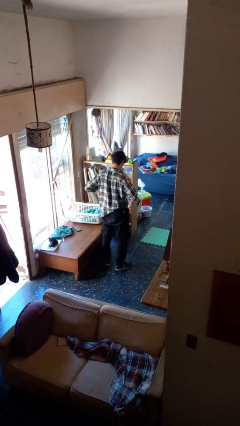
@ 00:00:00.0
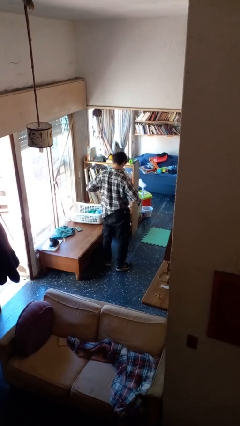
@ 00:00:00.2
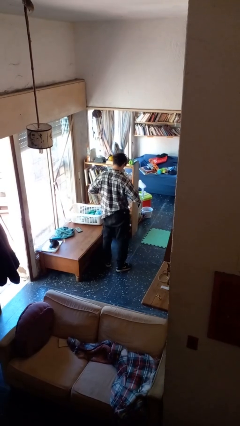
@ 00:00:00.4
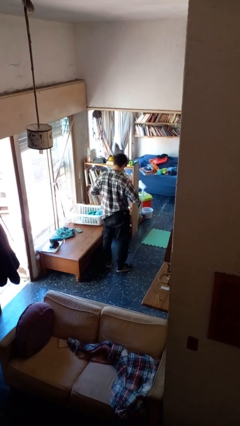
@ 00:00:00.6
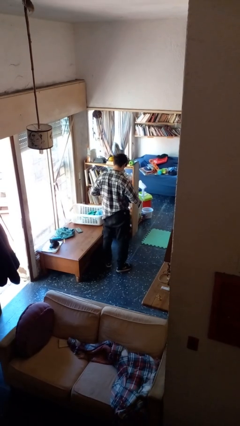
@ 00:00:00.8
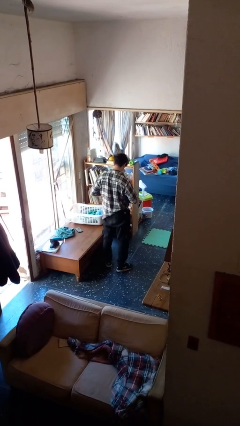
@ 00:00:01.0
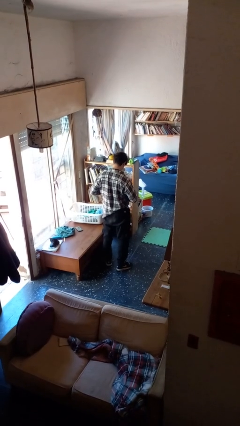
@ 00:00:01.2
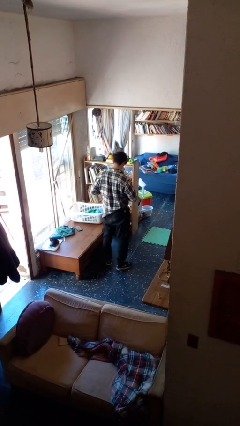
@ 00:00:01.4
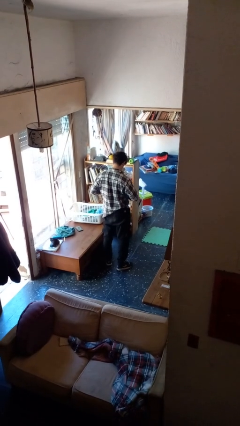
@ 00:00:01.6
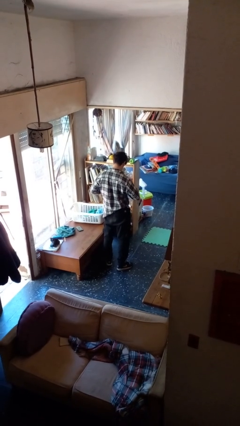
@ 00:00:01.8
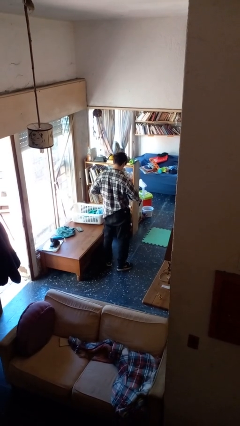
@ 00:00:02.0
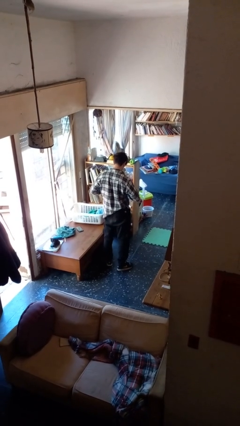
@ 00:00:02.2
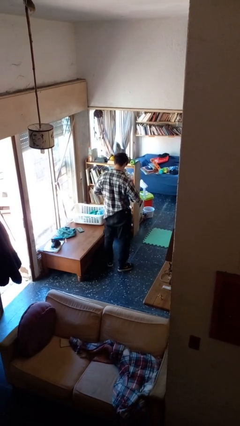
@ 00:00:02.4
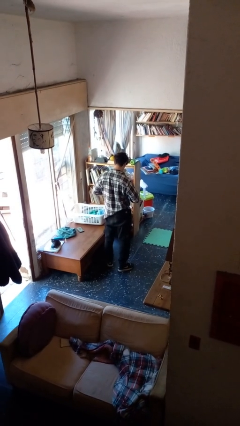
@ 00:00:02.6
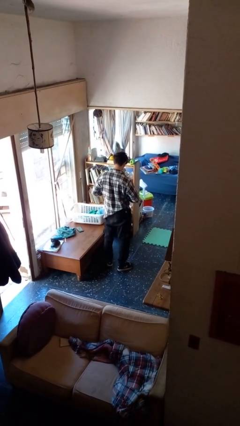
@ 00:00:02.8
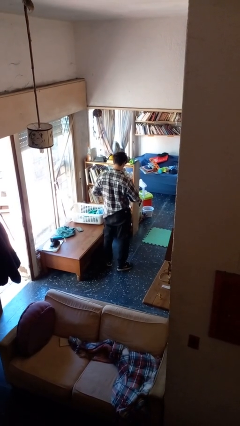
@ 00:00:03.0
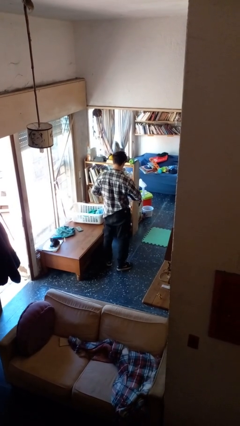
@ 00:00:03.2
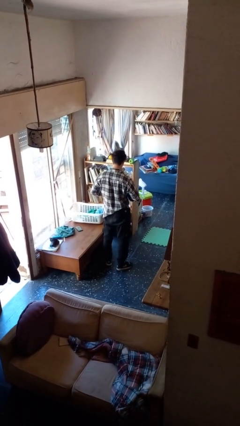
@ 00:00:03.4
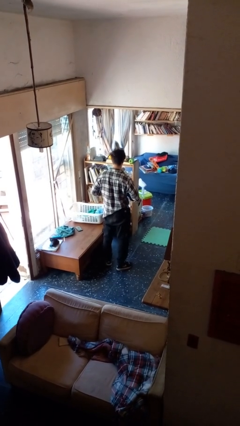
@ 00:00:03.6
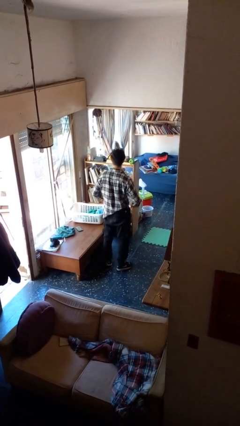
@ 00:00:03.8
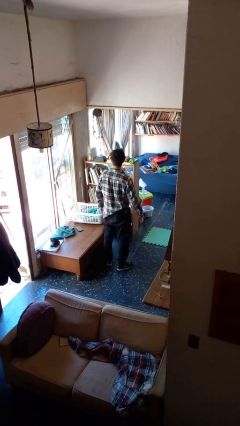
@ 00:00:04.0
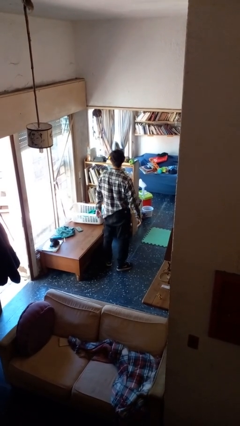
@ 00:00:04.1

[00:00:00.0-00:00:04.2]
person buttons shirt

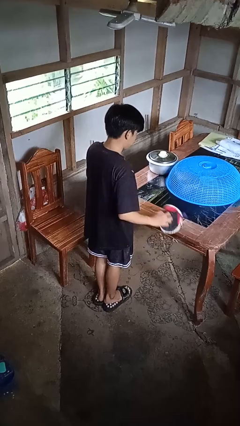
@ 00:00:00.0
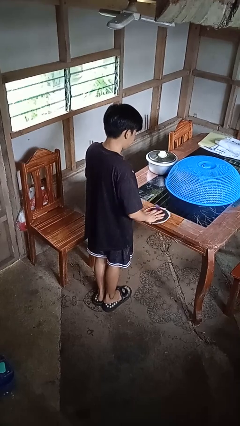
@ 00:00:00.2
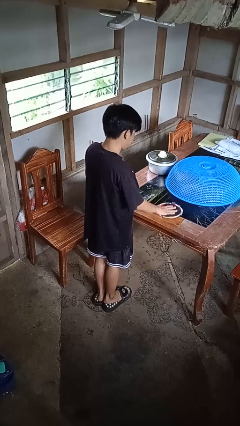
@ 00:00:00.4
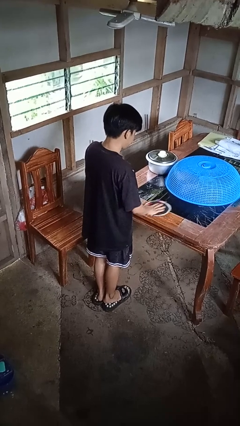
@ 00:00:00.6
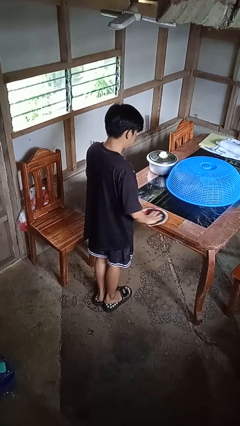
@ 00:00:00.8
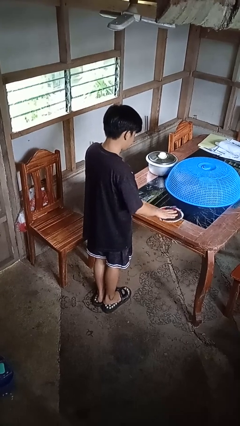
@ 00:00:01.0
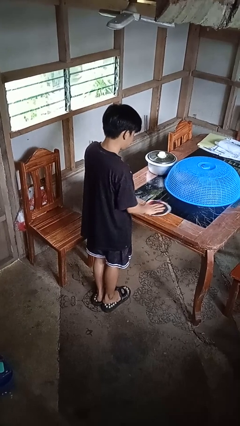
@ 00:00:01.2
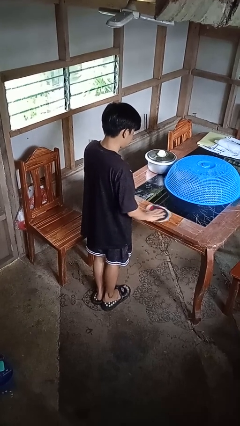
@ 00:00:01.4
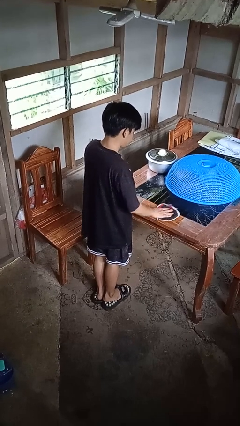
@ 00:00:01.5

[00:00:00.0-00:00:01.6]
person cleans table with rag

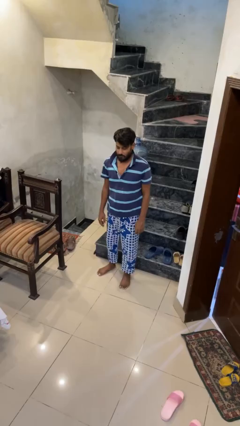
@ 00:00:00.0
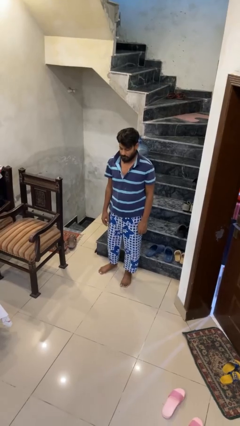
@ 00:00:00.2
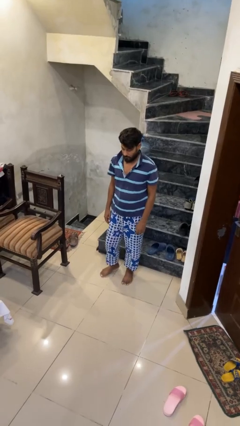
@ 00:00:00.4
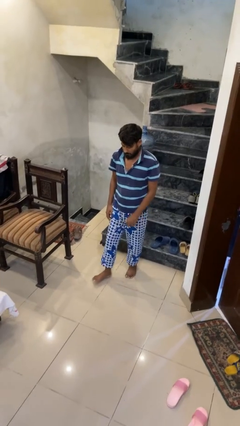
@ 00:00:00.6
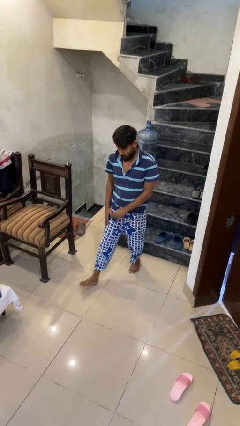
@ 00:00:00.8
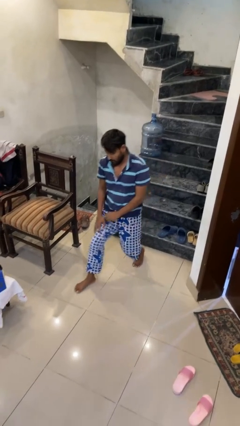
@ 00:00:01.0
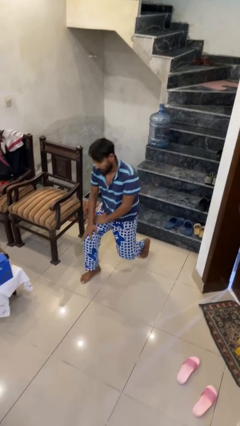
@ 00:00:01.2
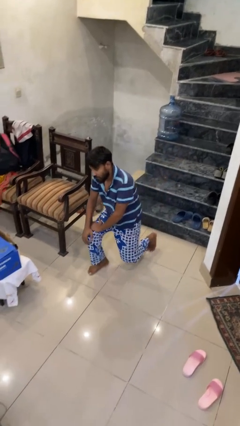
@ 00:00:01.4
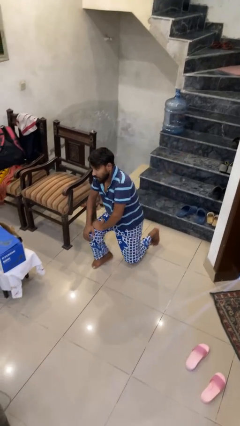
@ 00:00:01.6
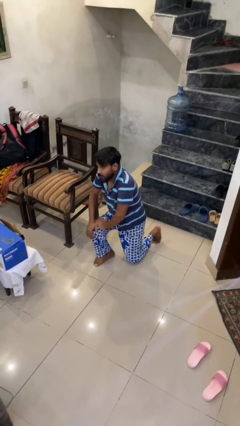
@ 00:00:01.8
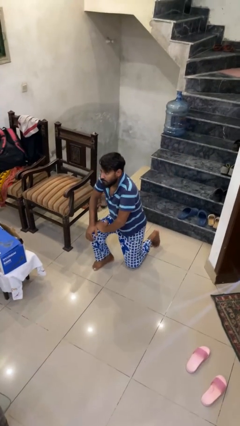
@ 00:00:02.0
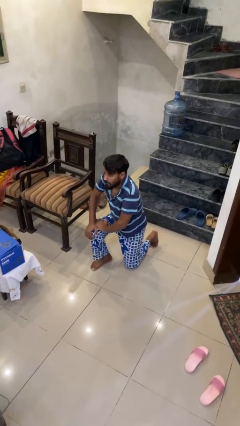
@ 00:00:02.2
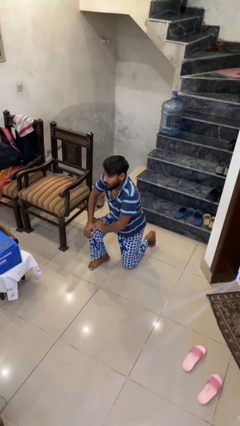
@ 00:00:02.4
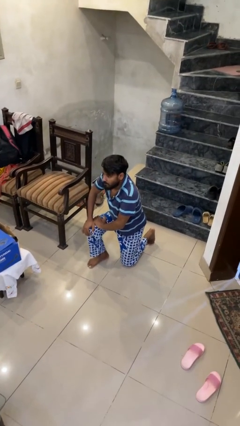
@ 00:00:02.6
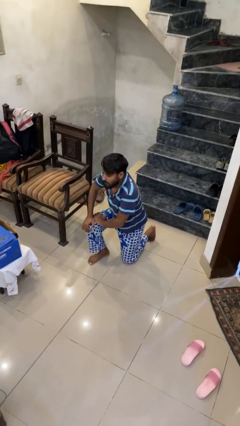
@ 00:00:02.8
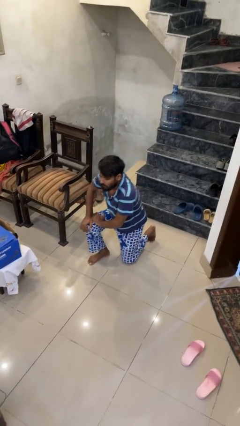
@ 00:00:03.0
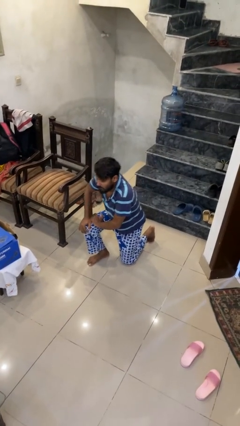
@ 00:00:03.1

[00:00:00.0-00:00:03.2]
person kneels

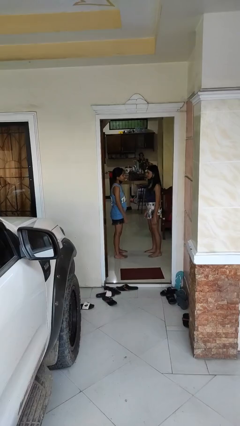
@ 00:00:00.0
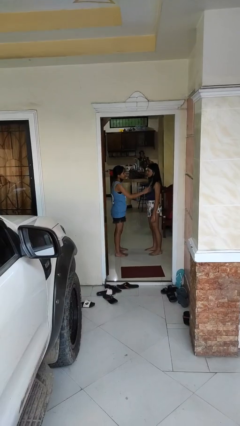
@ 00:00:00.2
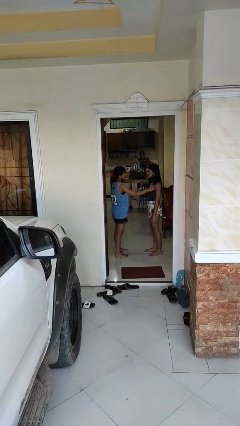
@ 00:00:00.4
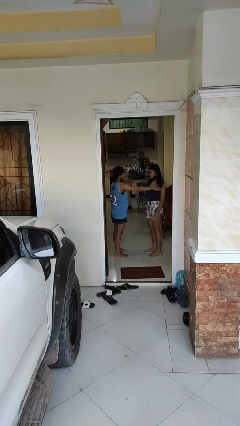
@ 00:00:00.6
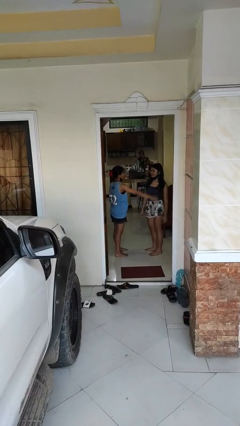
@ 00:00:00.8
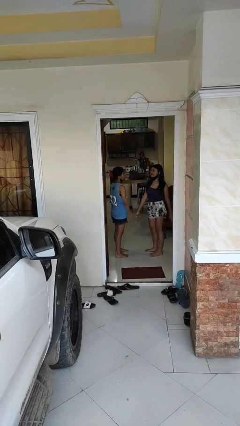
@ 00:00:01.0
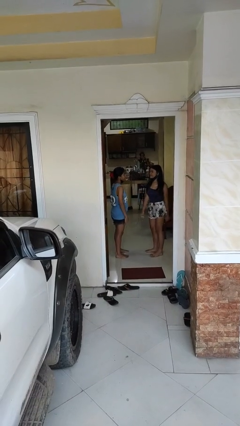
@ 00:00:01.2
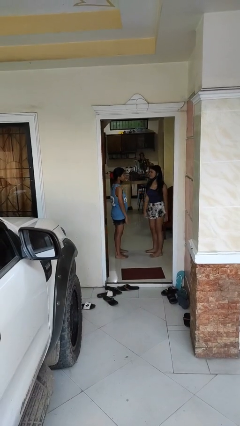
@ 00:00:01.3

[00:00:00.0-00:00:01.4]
person shoves person

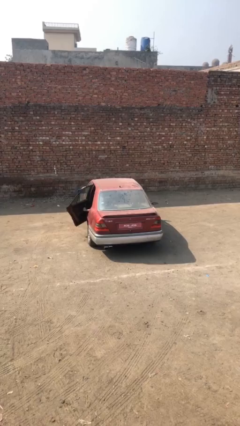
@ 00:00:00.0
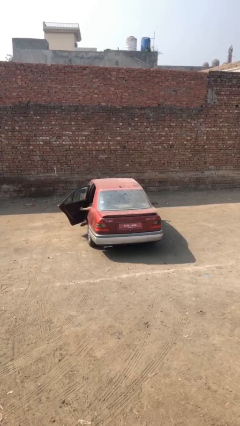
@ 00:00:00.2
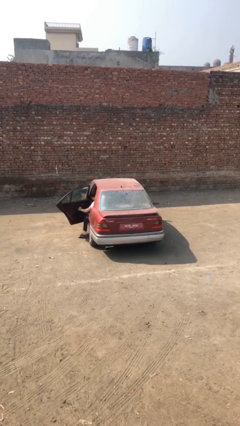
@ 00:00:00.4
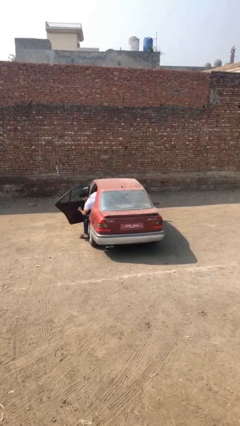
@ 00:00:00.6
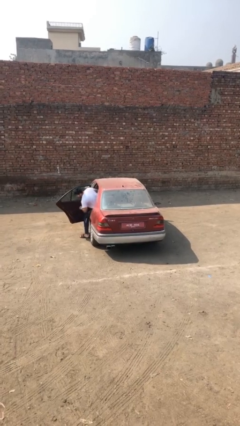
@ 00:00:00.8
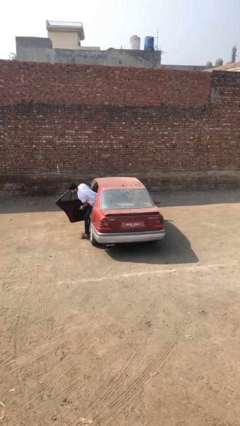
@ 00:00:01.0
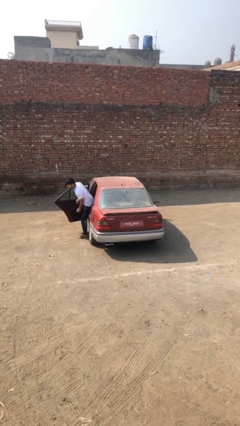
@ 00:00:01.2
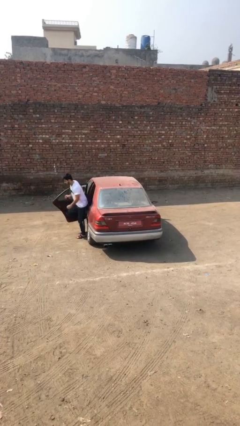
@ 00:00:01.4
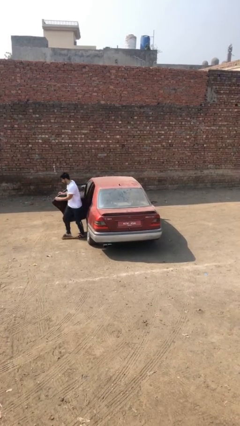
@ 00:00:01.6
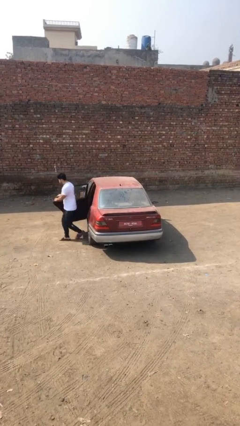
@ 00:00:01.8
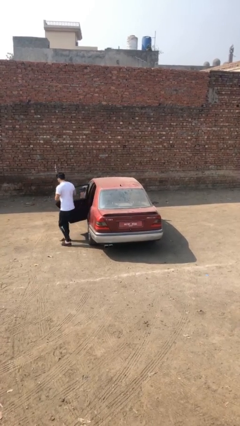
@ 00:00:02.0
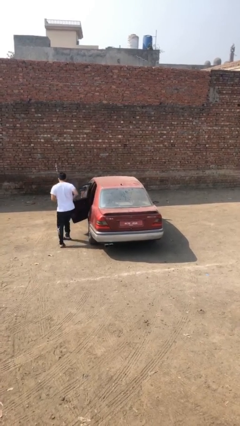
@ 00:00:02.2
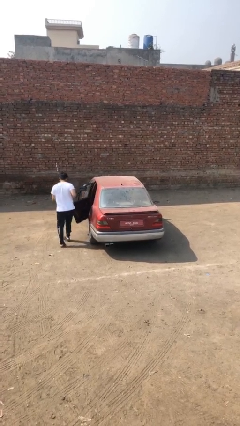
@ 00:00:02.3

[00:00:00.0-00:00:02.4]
car drops off person

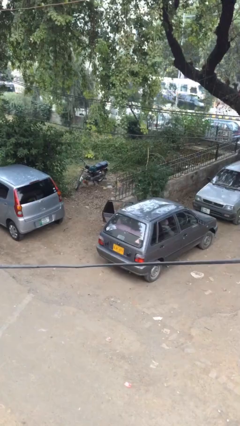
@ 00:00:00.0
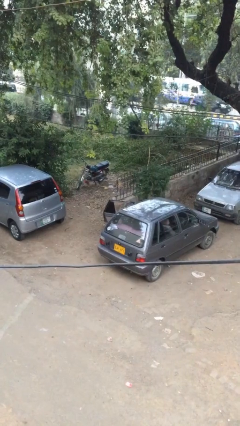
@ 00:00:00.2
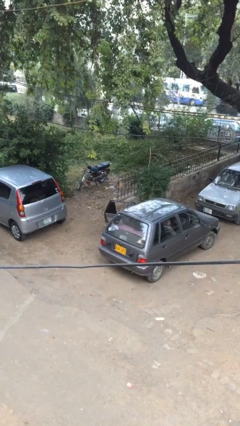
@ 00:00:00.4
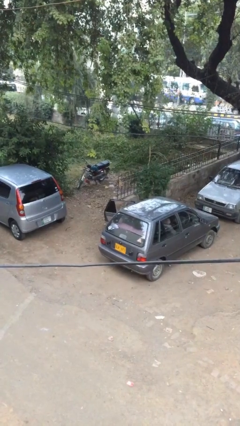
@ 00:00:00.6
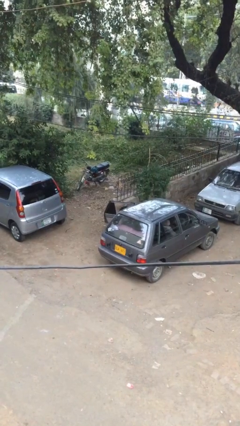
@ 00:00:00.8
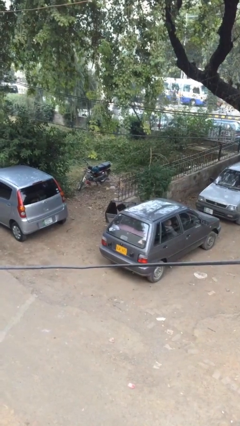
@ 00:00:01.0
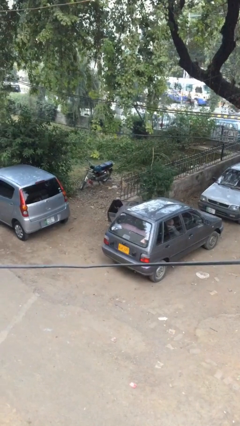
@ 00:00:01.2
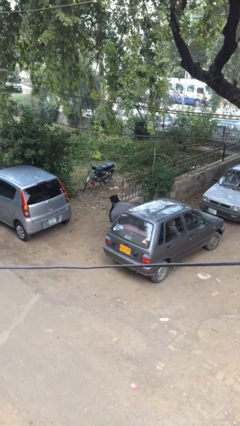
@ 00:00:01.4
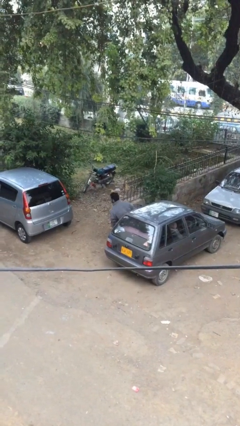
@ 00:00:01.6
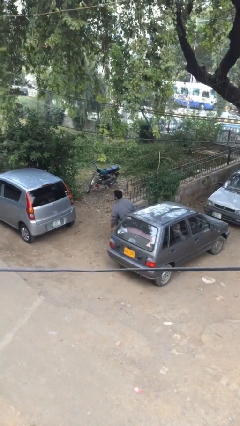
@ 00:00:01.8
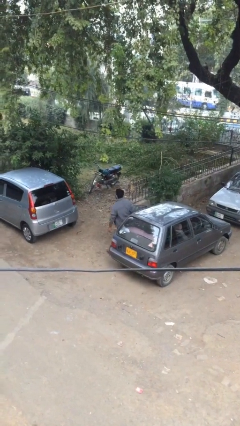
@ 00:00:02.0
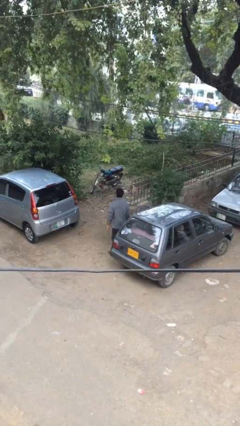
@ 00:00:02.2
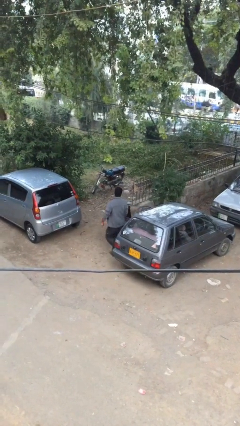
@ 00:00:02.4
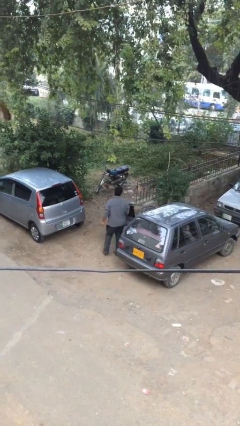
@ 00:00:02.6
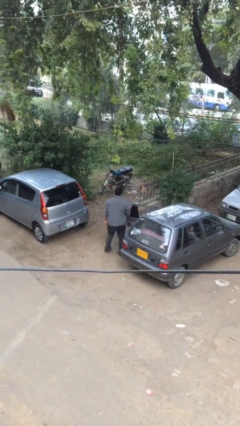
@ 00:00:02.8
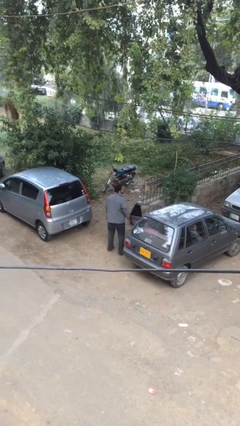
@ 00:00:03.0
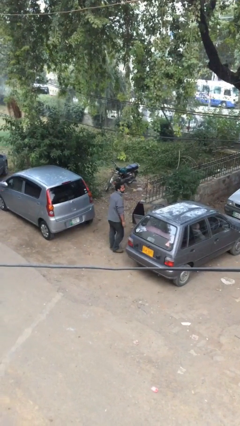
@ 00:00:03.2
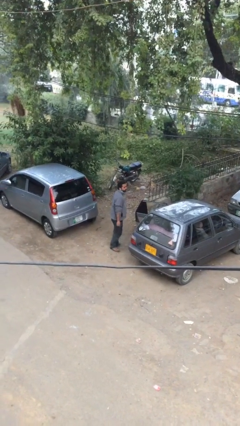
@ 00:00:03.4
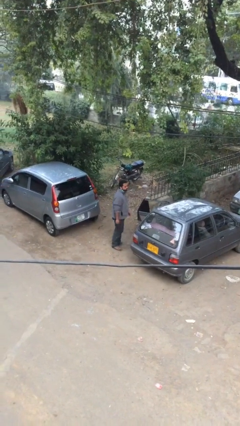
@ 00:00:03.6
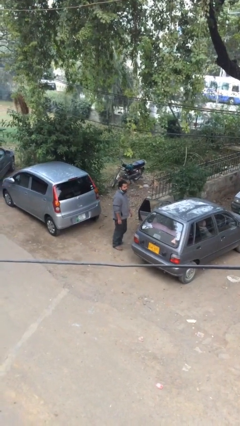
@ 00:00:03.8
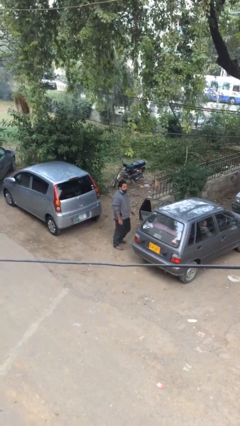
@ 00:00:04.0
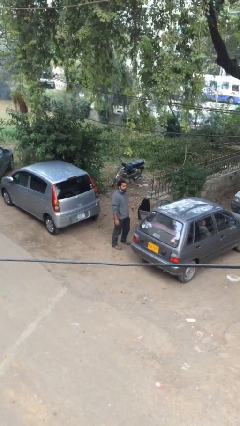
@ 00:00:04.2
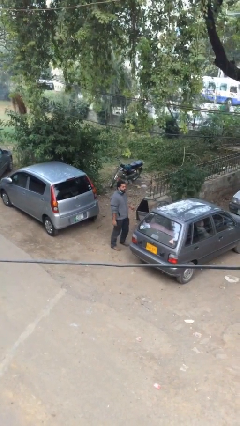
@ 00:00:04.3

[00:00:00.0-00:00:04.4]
person exits car

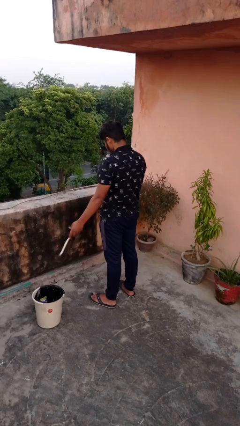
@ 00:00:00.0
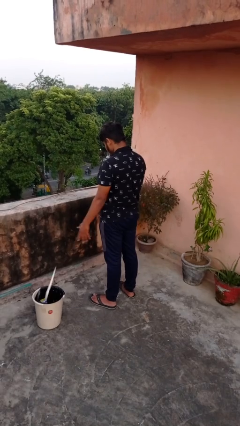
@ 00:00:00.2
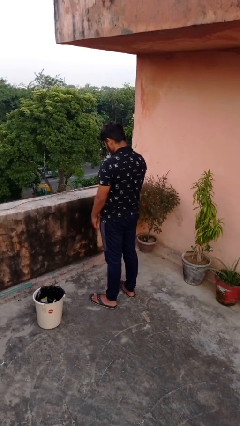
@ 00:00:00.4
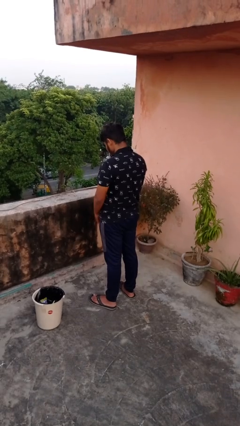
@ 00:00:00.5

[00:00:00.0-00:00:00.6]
person discards trash
